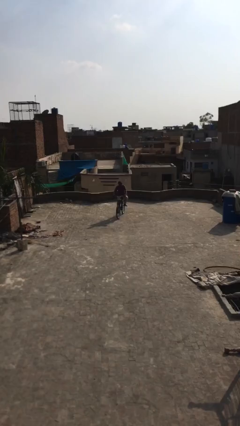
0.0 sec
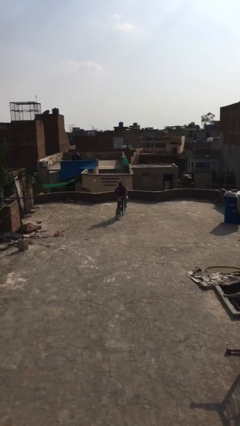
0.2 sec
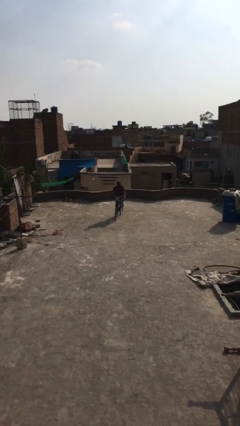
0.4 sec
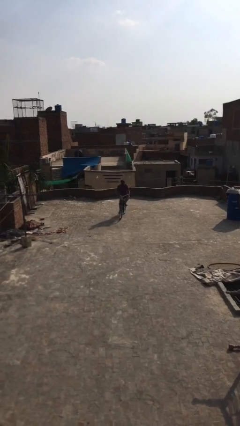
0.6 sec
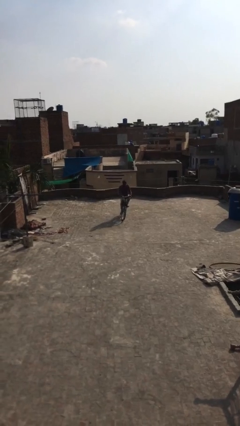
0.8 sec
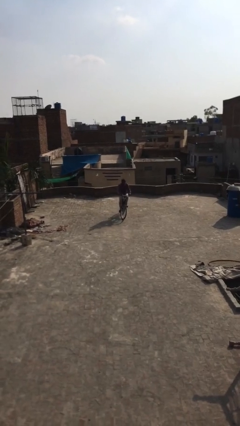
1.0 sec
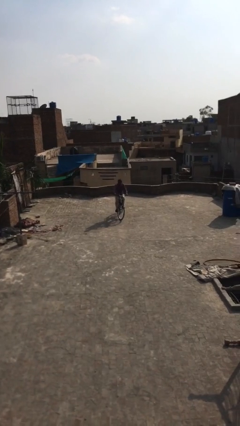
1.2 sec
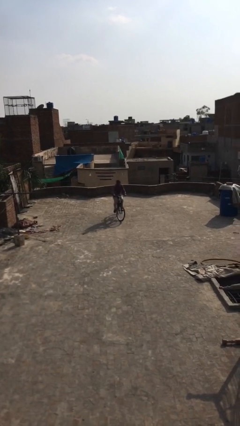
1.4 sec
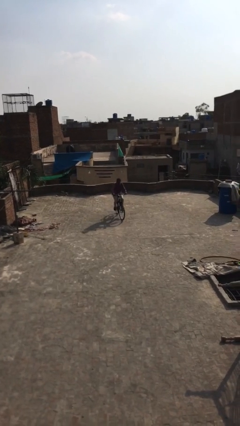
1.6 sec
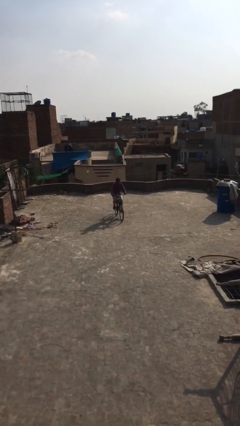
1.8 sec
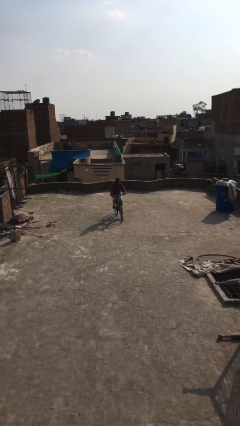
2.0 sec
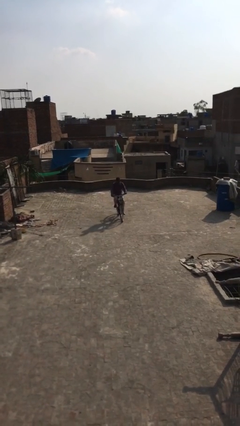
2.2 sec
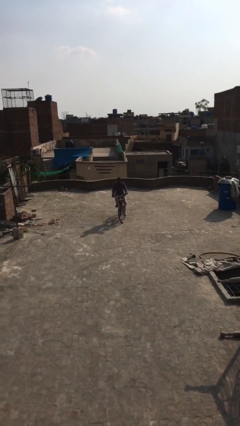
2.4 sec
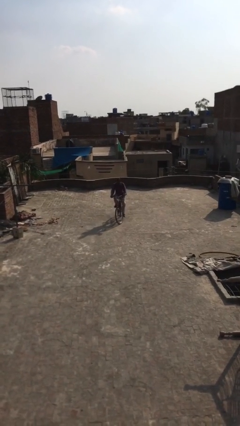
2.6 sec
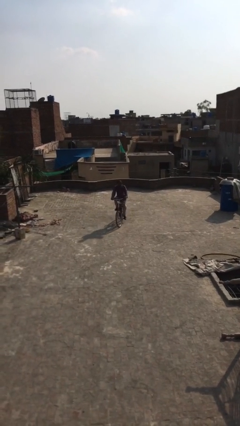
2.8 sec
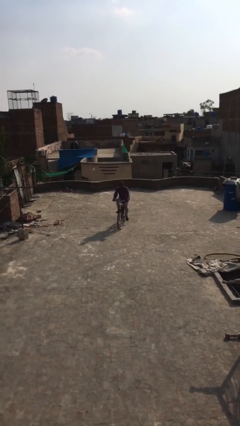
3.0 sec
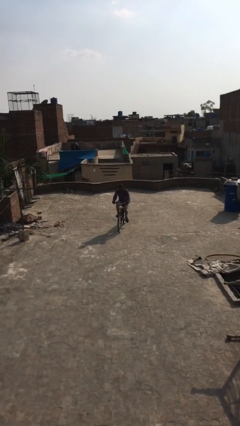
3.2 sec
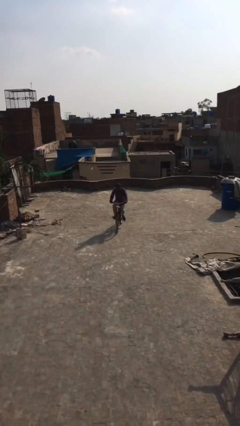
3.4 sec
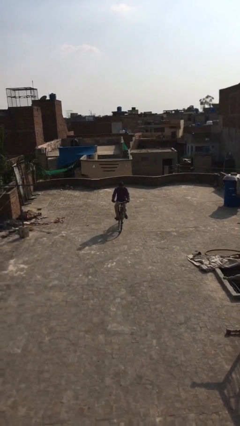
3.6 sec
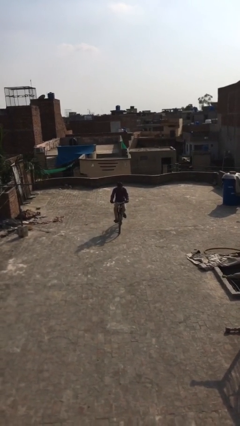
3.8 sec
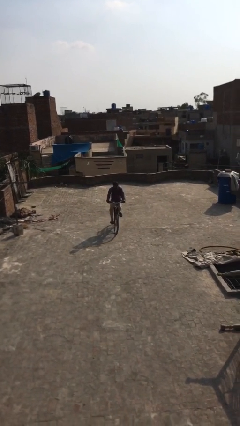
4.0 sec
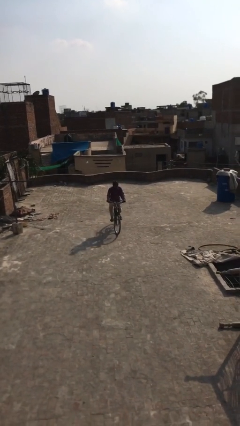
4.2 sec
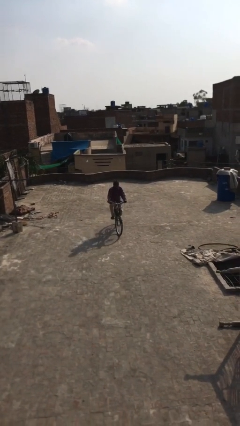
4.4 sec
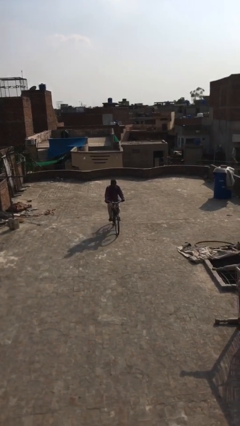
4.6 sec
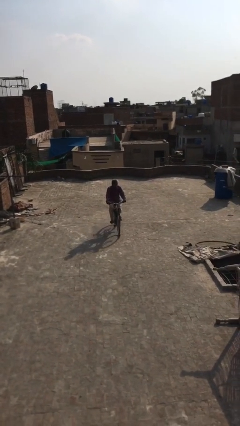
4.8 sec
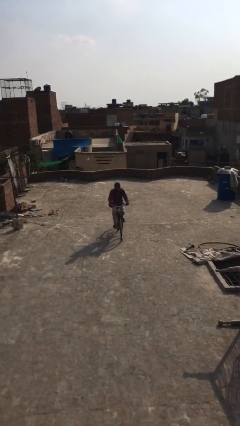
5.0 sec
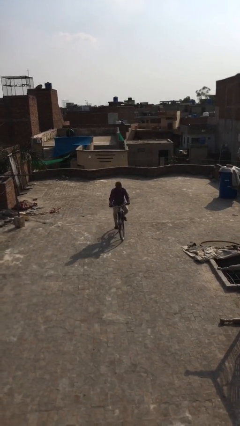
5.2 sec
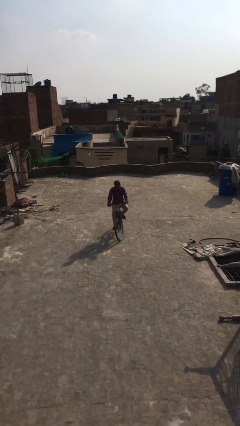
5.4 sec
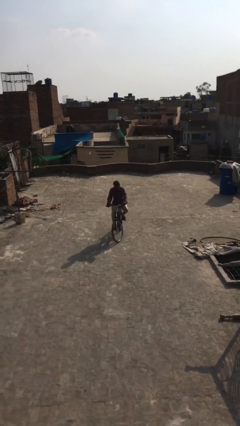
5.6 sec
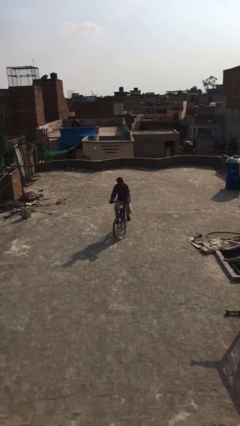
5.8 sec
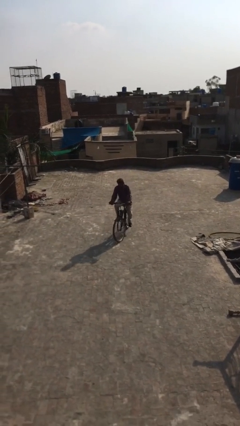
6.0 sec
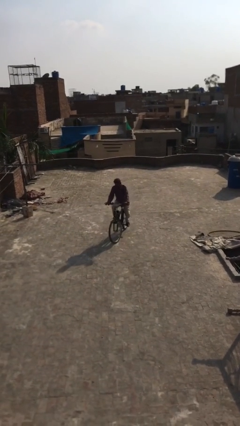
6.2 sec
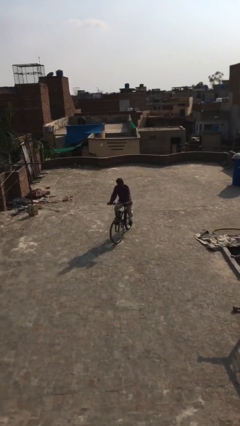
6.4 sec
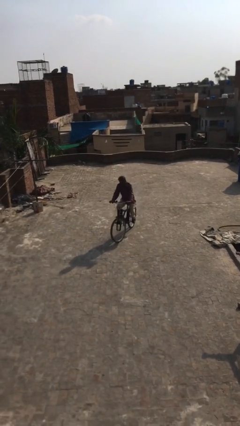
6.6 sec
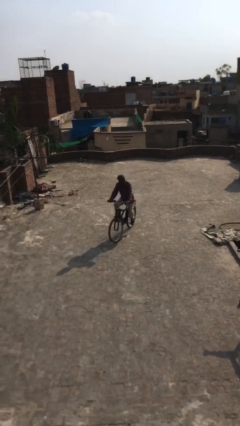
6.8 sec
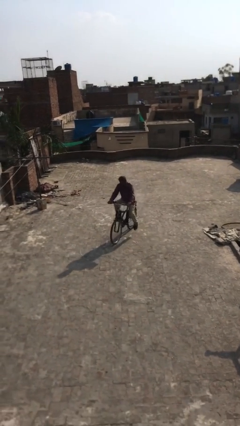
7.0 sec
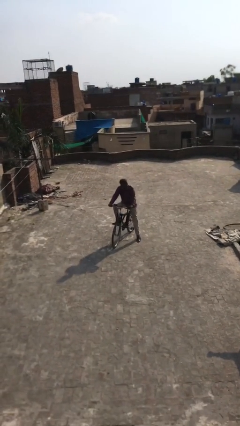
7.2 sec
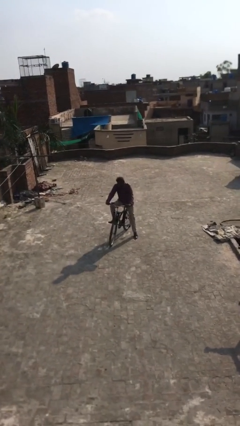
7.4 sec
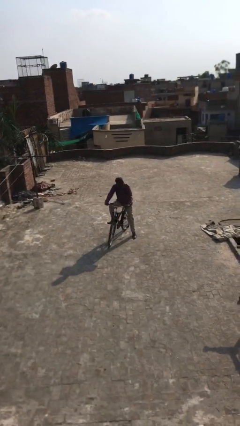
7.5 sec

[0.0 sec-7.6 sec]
person rides bicycle

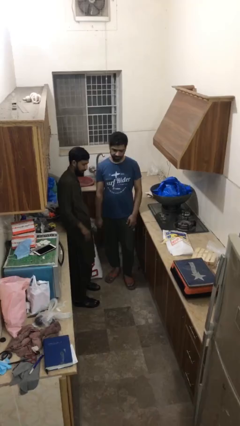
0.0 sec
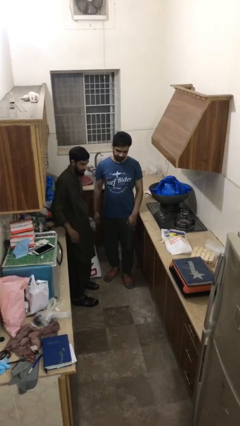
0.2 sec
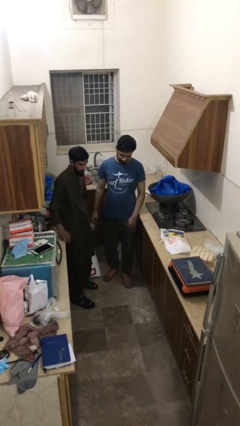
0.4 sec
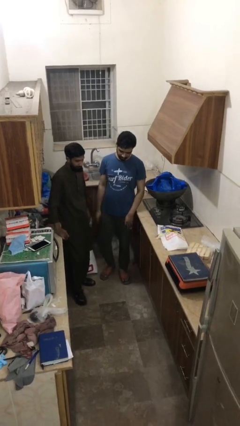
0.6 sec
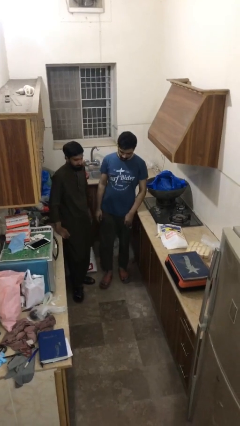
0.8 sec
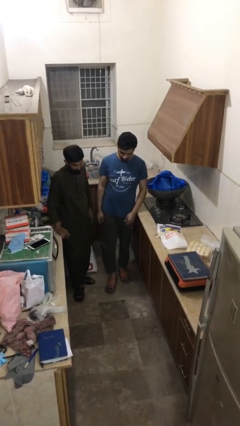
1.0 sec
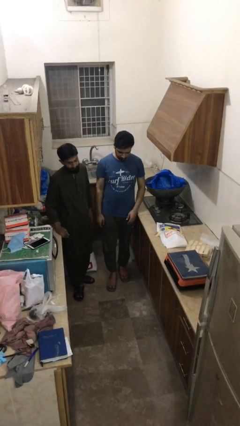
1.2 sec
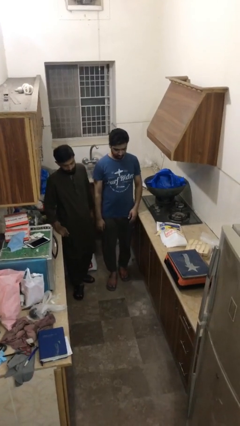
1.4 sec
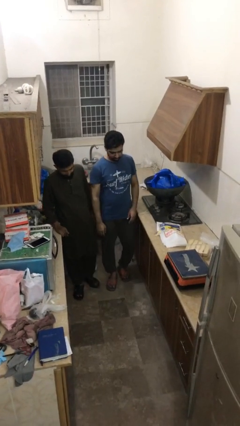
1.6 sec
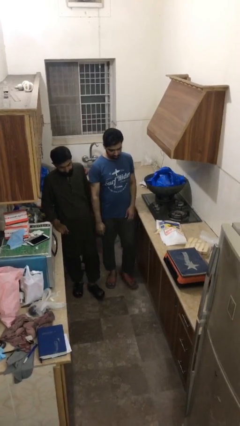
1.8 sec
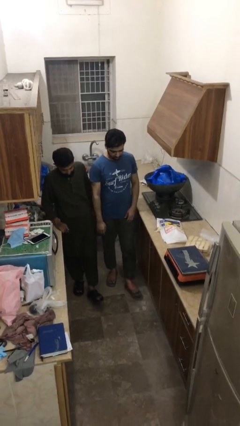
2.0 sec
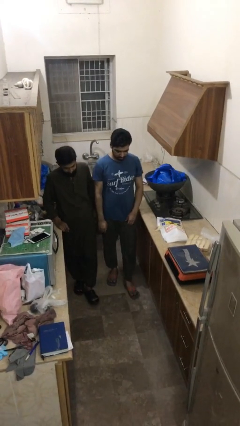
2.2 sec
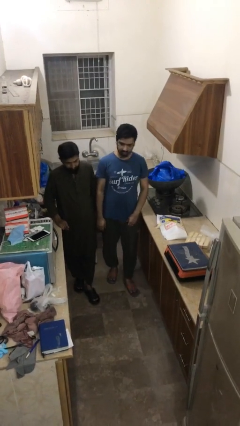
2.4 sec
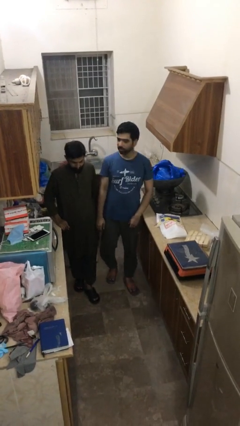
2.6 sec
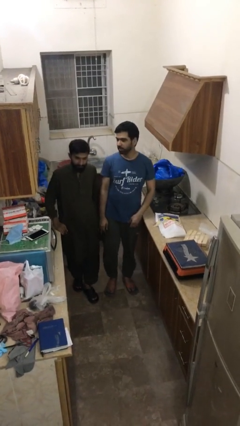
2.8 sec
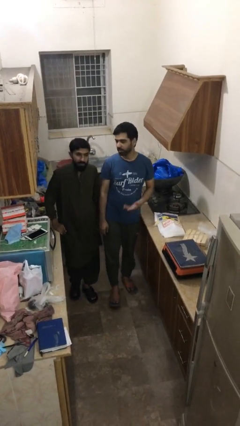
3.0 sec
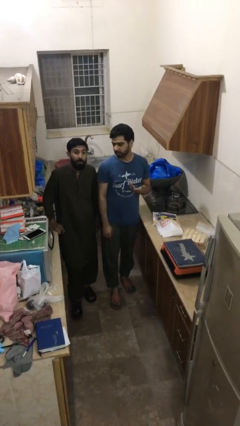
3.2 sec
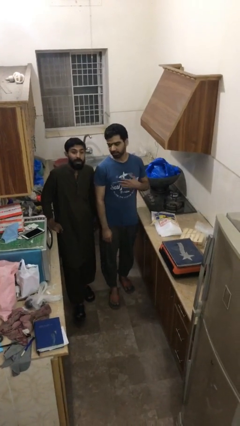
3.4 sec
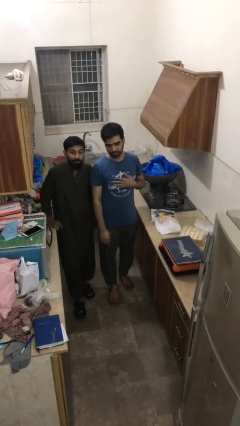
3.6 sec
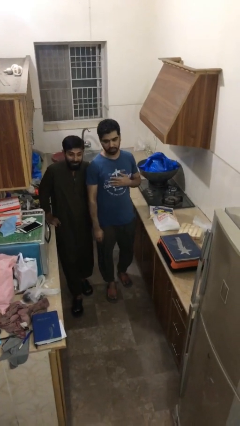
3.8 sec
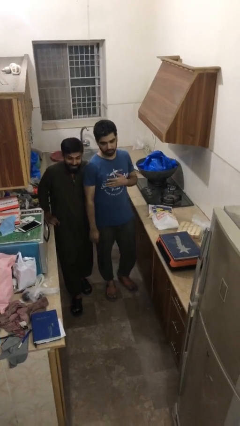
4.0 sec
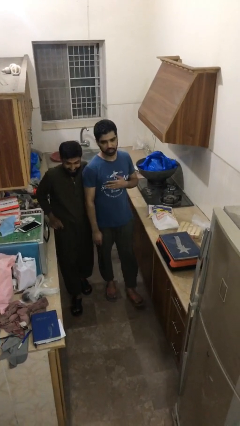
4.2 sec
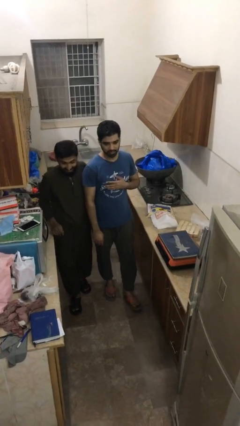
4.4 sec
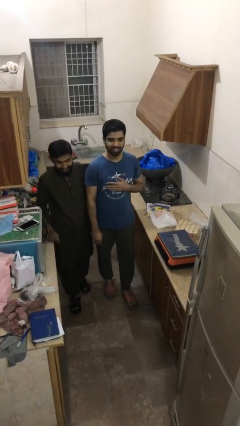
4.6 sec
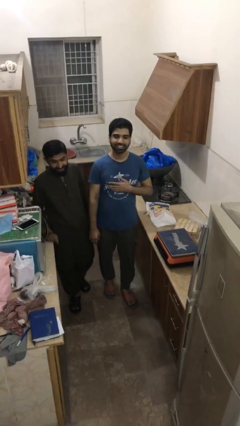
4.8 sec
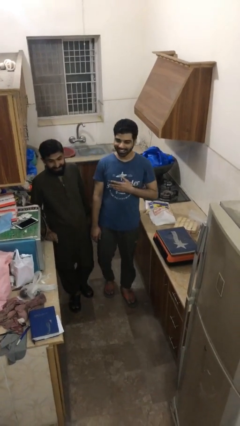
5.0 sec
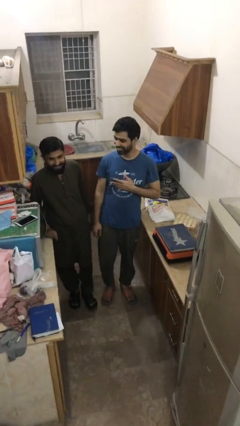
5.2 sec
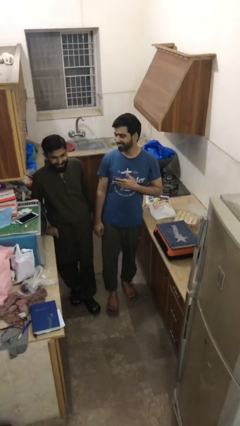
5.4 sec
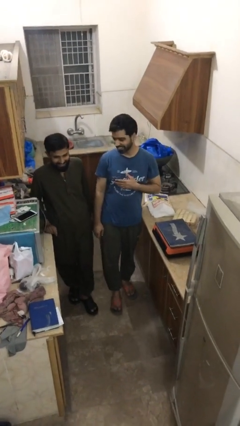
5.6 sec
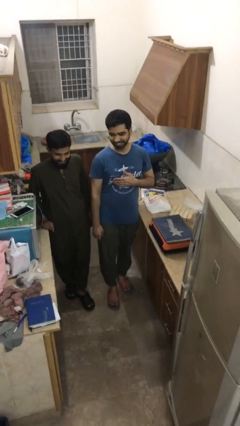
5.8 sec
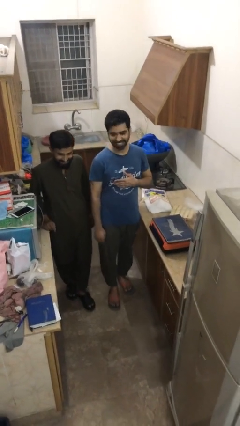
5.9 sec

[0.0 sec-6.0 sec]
person talks to person

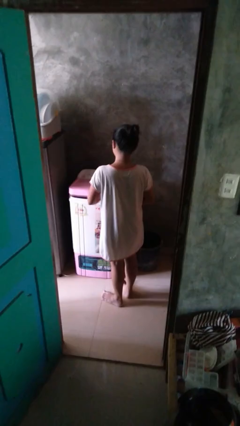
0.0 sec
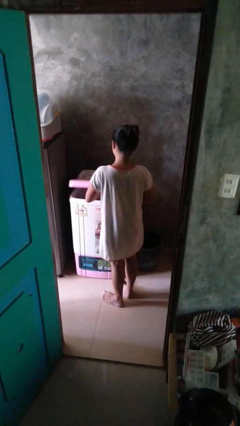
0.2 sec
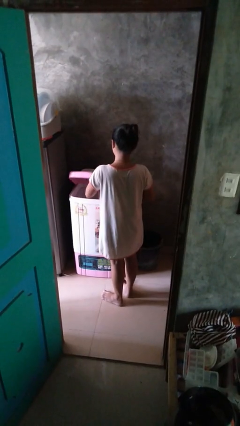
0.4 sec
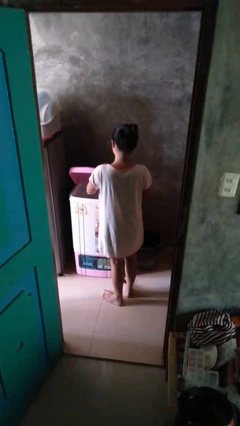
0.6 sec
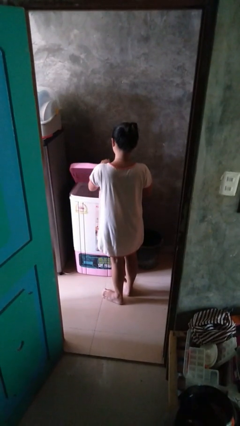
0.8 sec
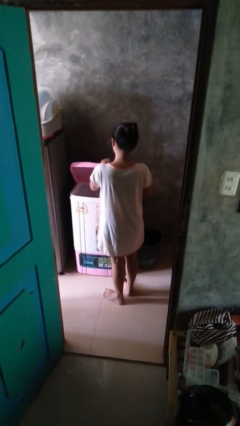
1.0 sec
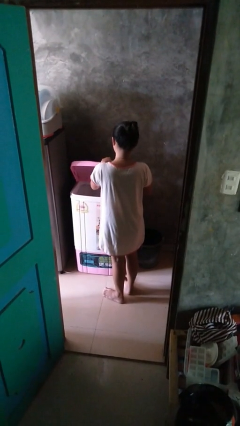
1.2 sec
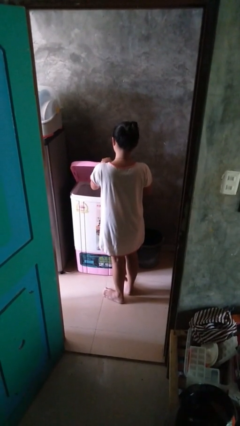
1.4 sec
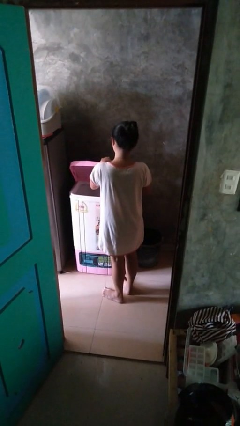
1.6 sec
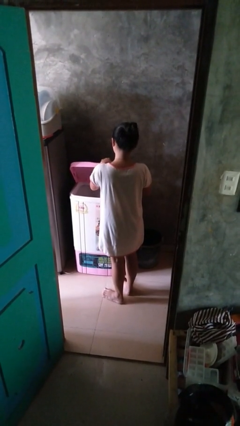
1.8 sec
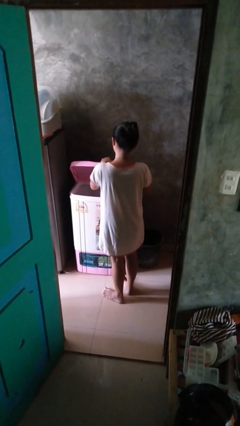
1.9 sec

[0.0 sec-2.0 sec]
person opens clothes washer

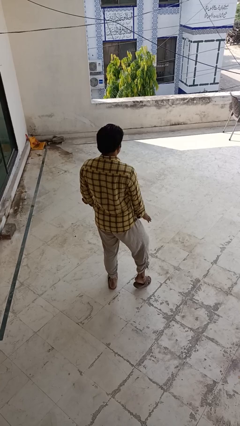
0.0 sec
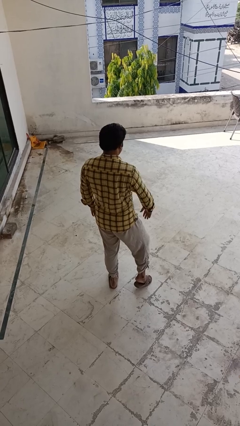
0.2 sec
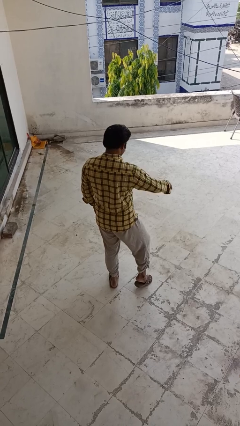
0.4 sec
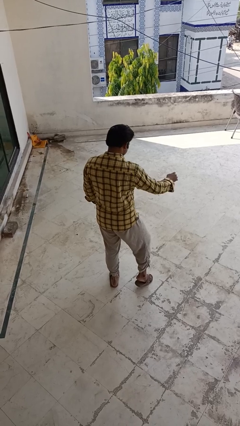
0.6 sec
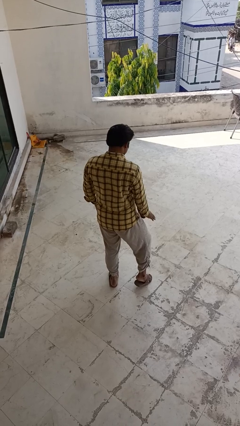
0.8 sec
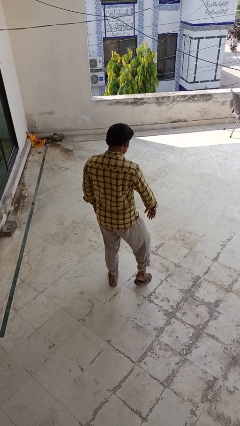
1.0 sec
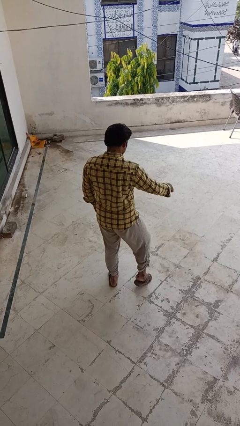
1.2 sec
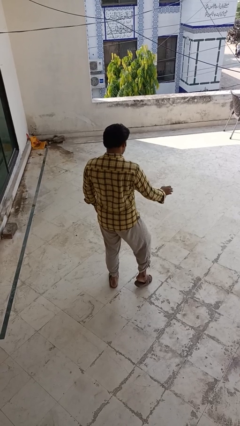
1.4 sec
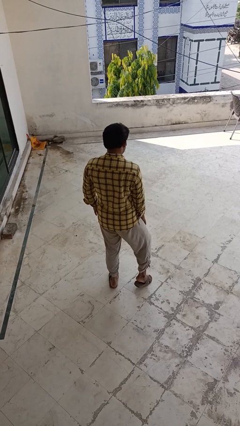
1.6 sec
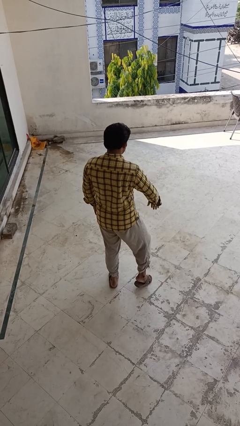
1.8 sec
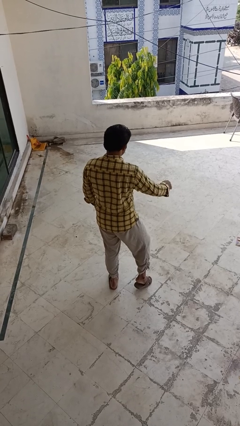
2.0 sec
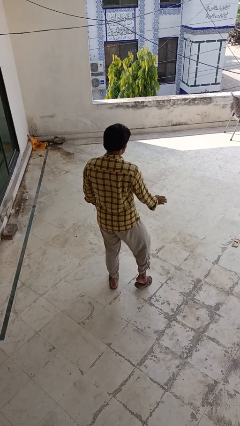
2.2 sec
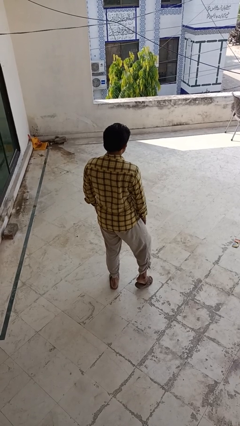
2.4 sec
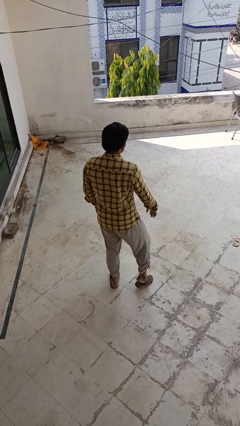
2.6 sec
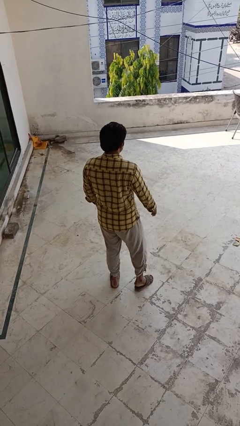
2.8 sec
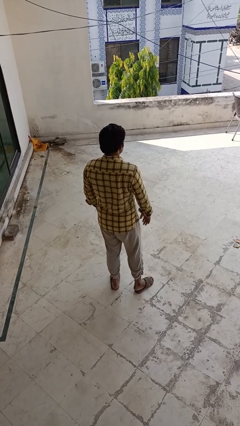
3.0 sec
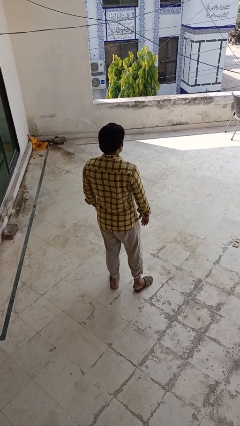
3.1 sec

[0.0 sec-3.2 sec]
person slaps hands on thighs
